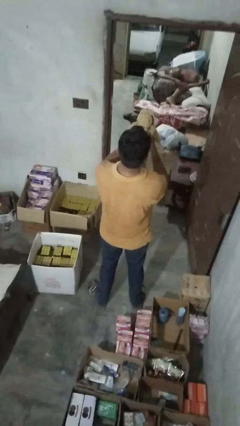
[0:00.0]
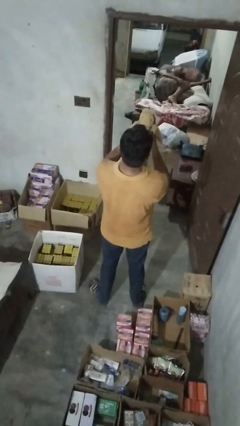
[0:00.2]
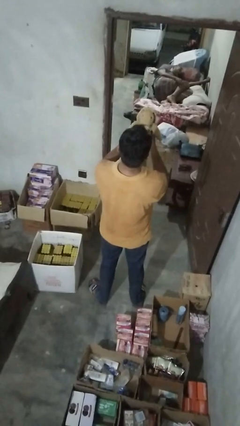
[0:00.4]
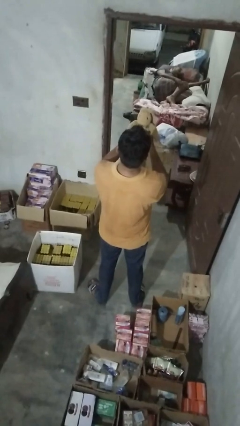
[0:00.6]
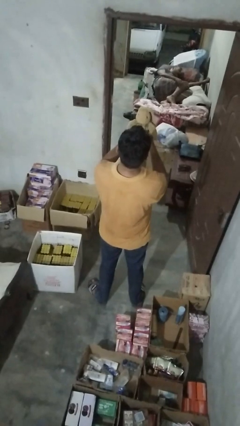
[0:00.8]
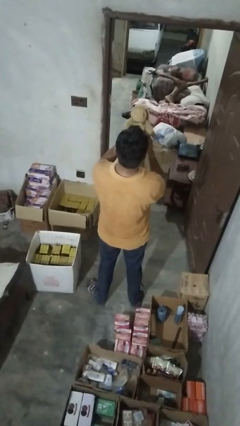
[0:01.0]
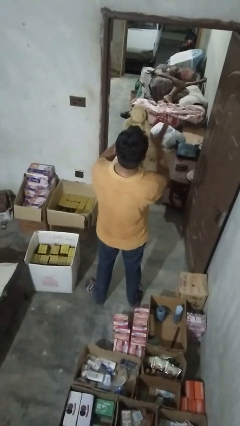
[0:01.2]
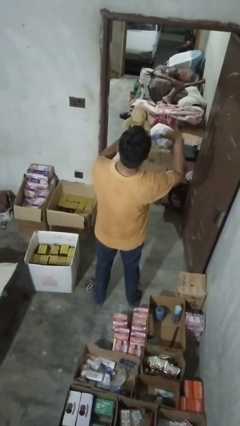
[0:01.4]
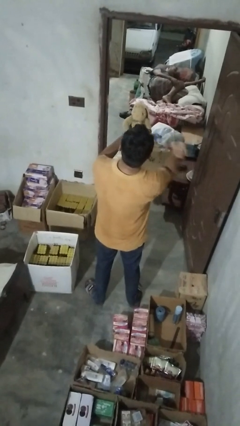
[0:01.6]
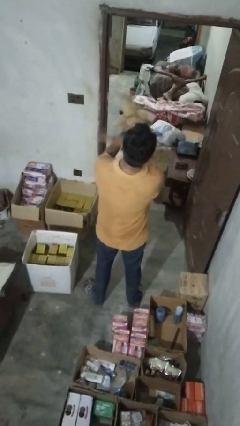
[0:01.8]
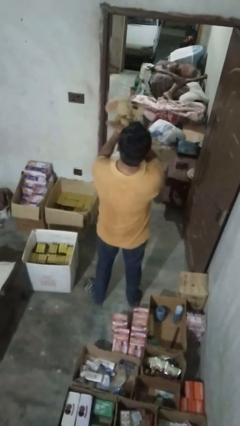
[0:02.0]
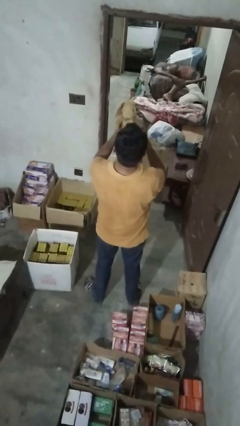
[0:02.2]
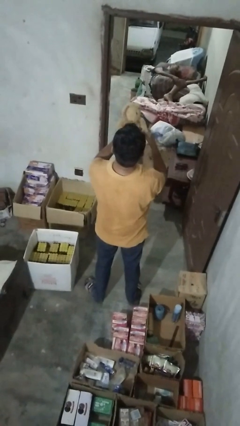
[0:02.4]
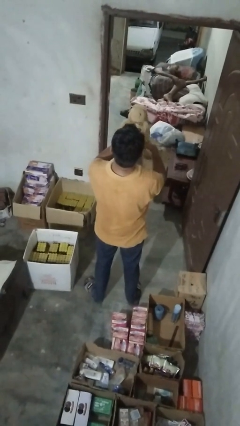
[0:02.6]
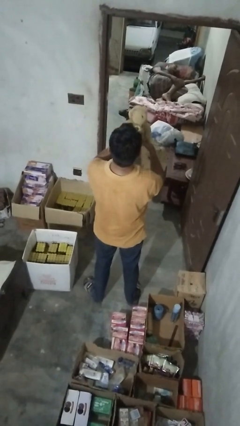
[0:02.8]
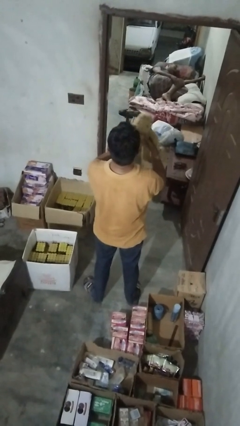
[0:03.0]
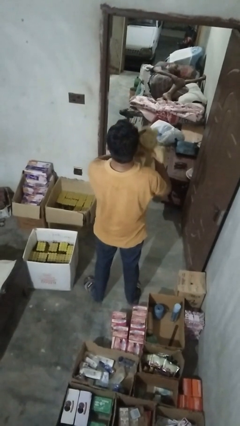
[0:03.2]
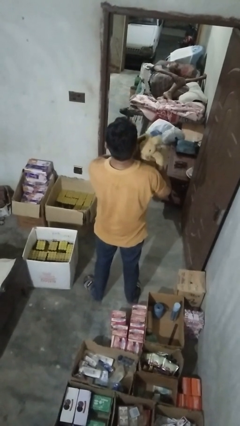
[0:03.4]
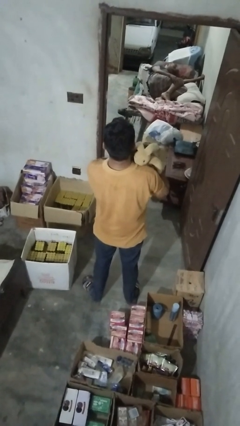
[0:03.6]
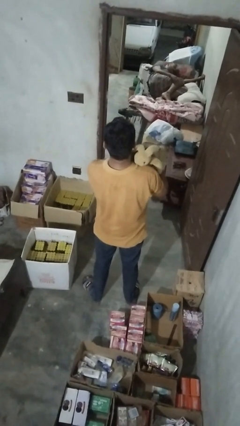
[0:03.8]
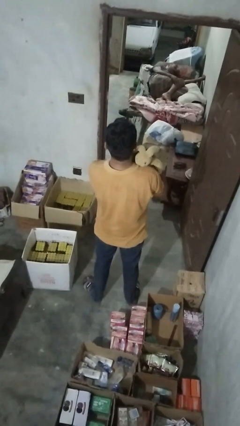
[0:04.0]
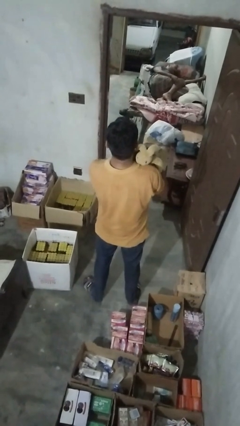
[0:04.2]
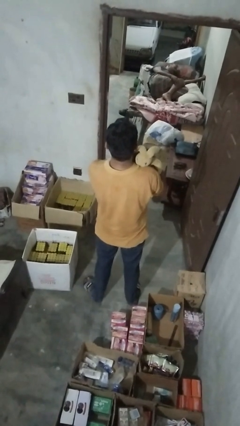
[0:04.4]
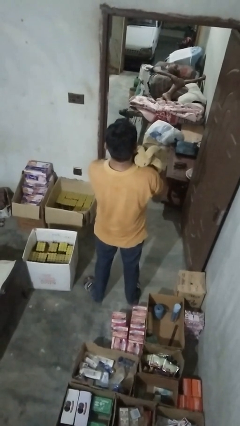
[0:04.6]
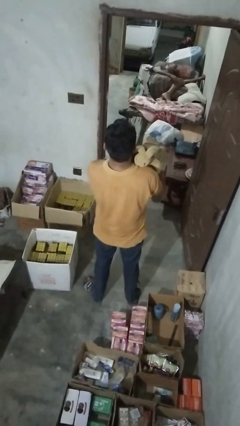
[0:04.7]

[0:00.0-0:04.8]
person hugs stuffed animal

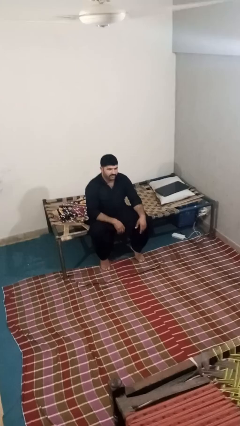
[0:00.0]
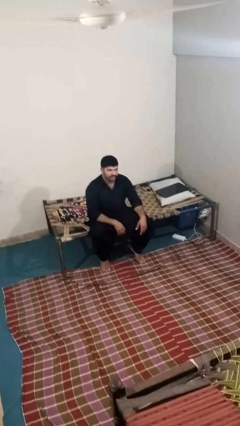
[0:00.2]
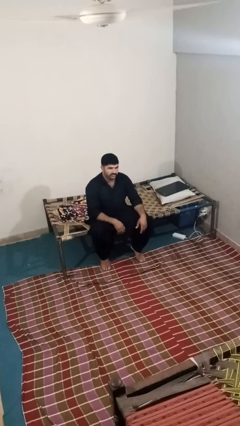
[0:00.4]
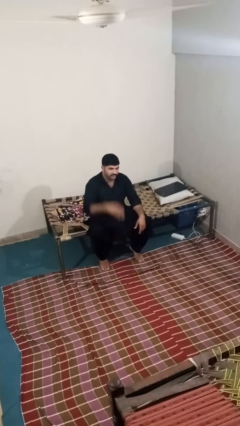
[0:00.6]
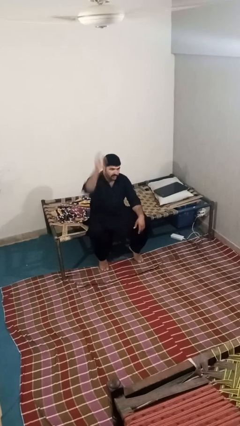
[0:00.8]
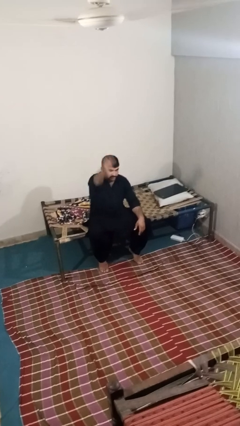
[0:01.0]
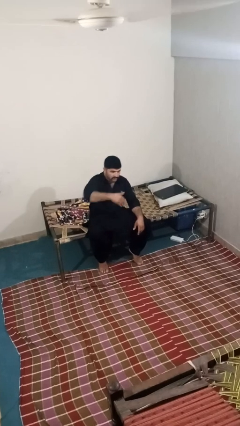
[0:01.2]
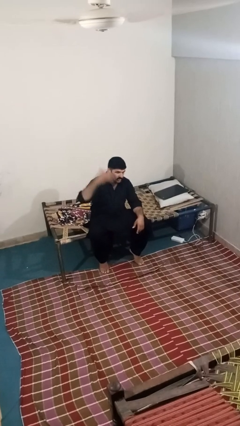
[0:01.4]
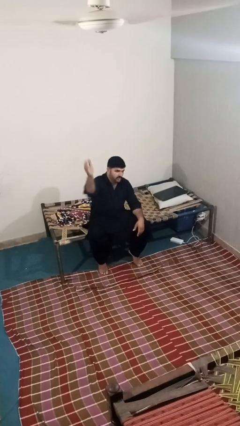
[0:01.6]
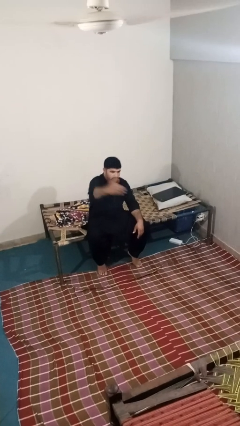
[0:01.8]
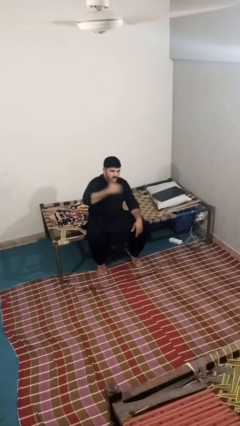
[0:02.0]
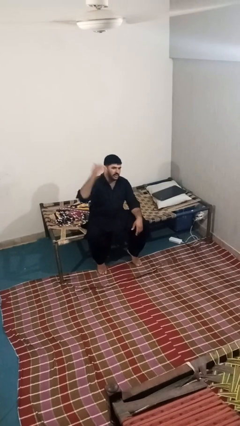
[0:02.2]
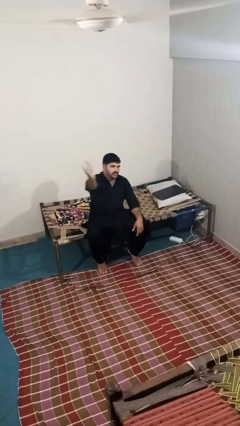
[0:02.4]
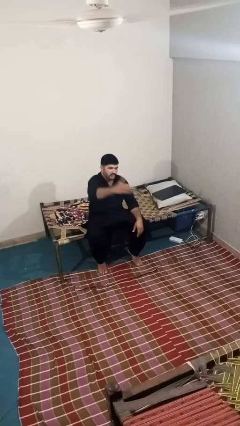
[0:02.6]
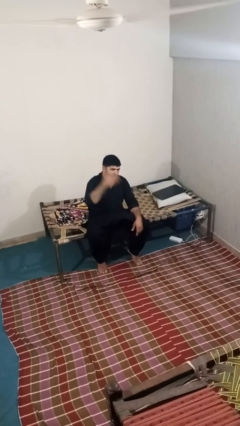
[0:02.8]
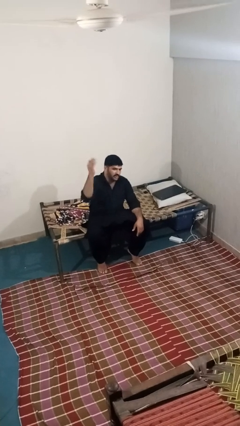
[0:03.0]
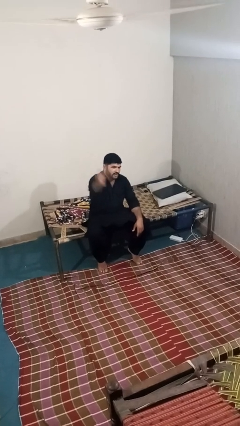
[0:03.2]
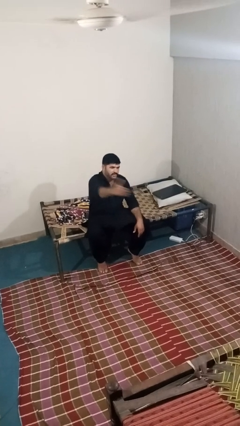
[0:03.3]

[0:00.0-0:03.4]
person gestures come here

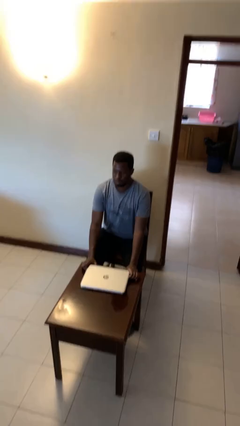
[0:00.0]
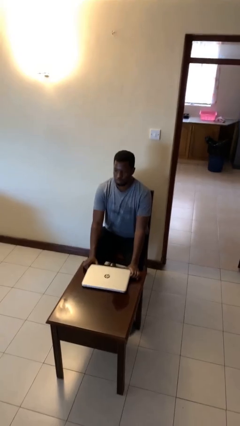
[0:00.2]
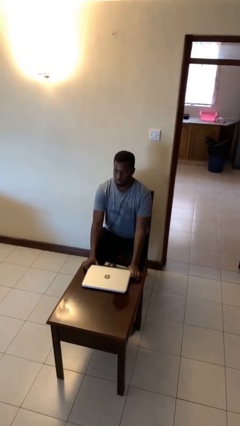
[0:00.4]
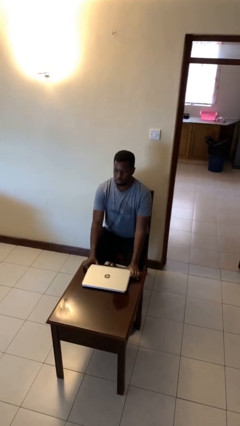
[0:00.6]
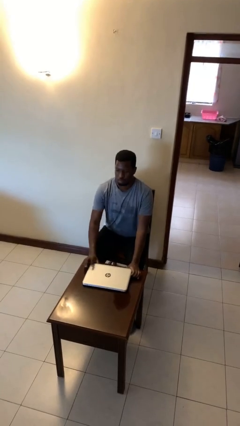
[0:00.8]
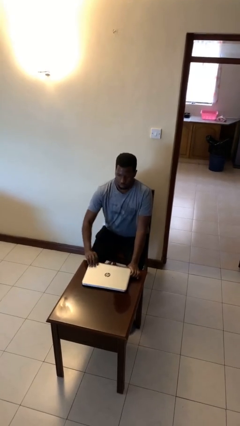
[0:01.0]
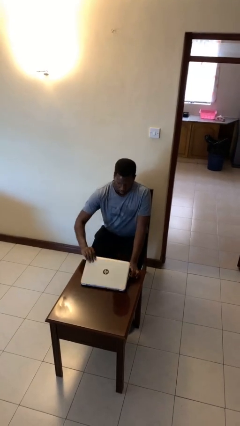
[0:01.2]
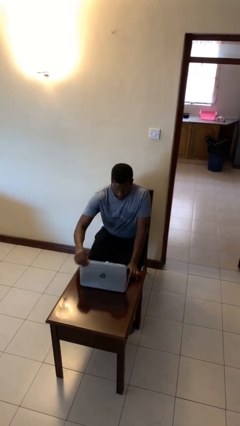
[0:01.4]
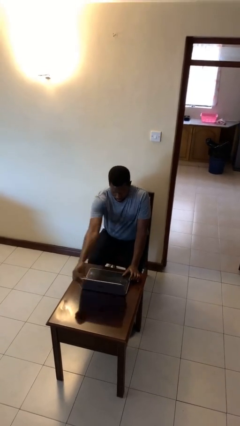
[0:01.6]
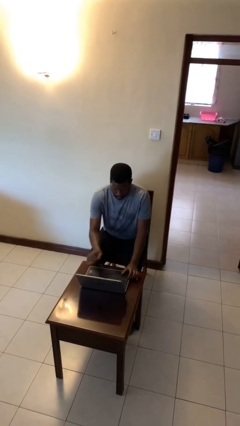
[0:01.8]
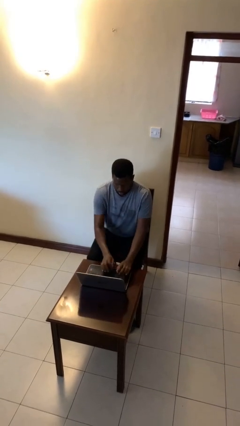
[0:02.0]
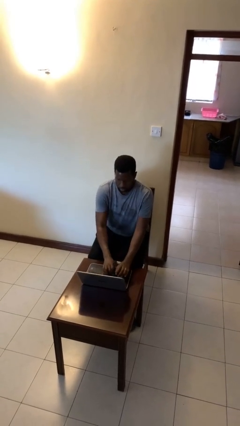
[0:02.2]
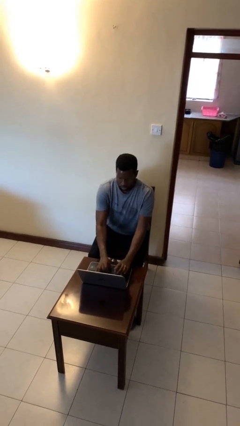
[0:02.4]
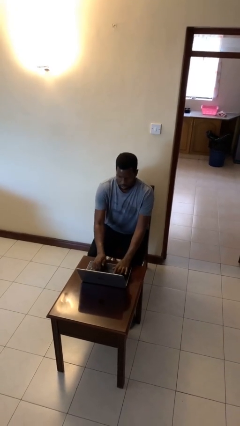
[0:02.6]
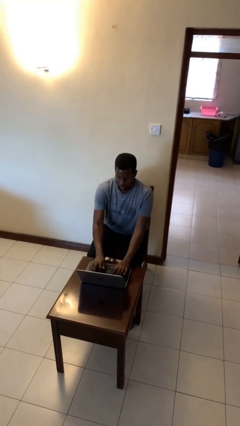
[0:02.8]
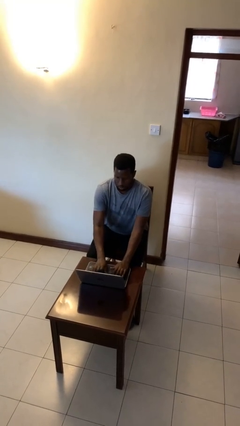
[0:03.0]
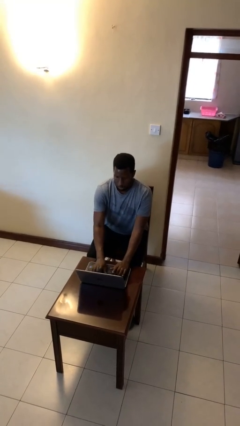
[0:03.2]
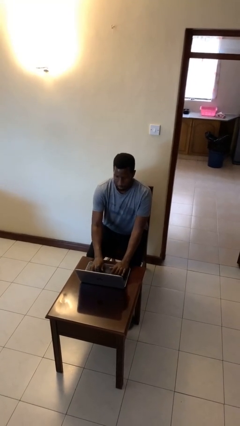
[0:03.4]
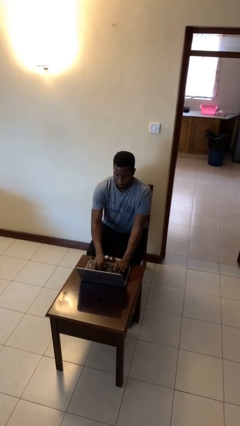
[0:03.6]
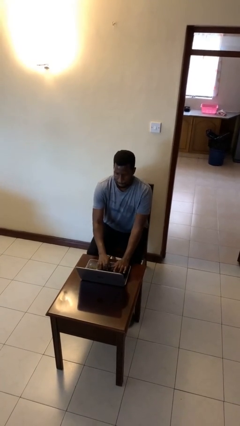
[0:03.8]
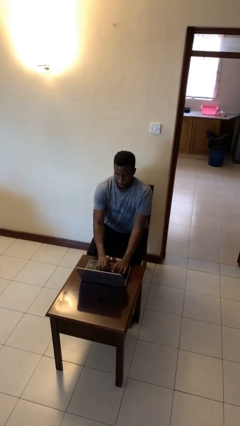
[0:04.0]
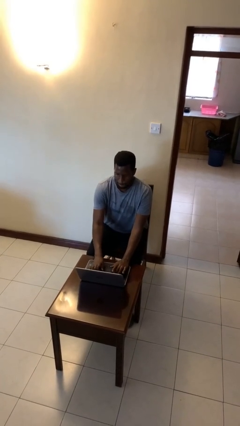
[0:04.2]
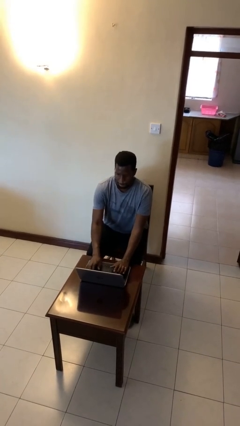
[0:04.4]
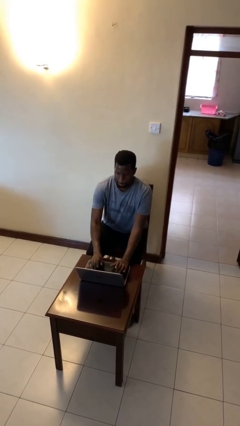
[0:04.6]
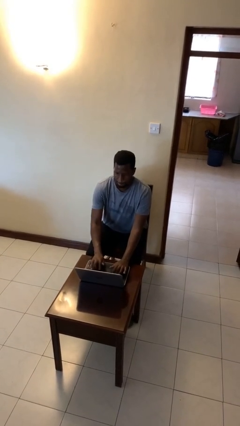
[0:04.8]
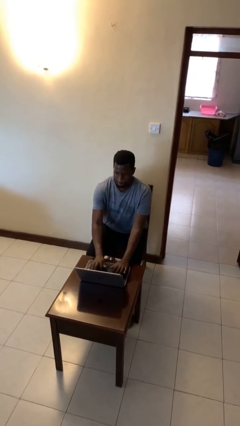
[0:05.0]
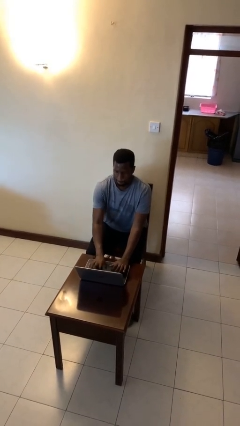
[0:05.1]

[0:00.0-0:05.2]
person interacts with laptop

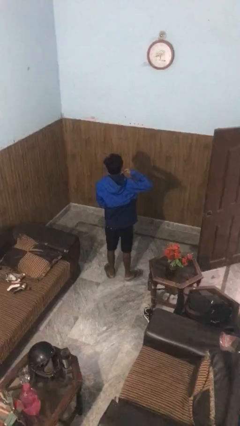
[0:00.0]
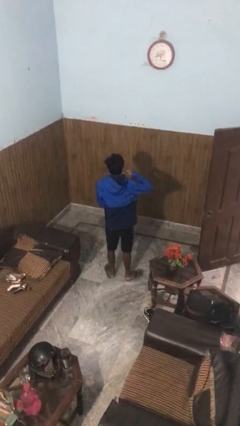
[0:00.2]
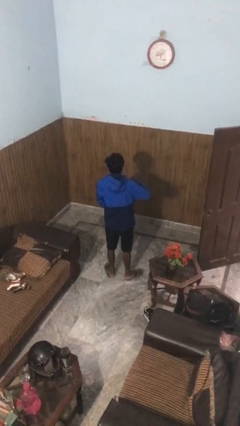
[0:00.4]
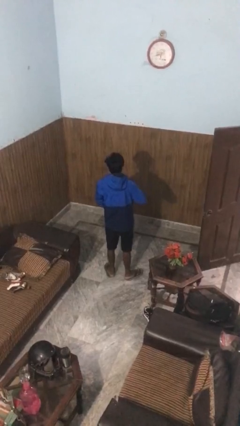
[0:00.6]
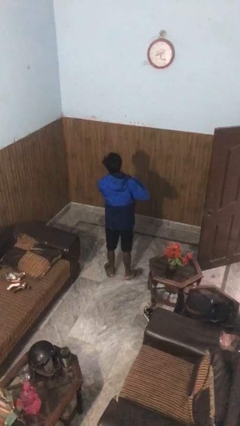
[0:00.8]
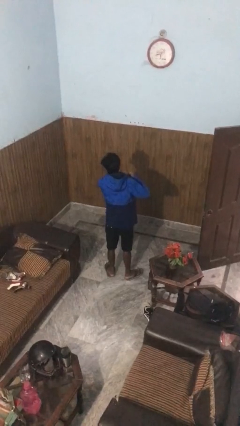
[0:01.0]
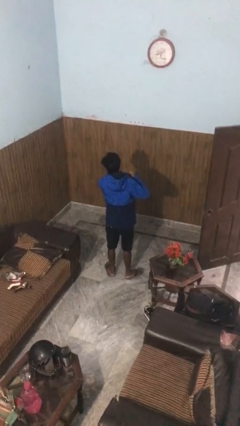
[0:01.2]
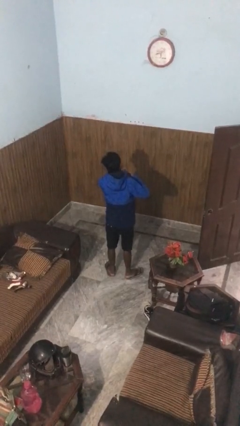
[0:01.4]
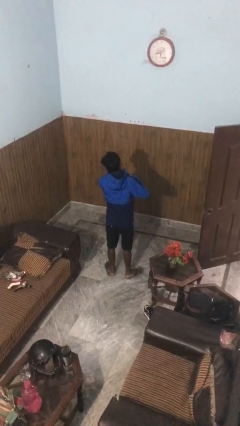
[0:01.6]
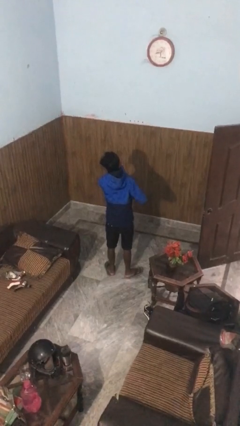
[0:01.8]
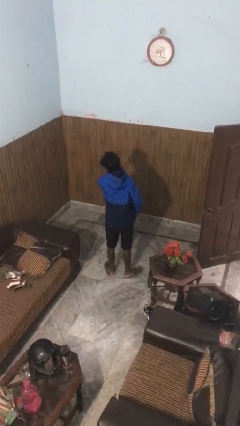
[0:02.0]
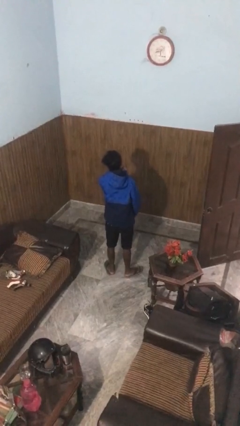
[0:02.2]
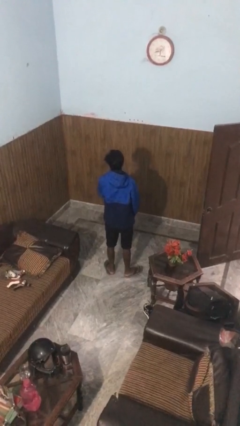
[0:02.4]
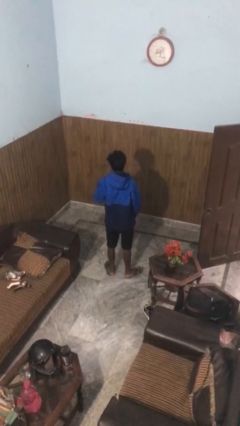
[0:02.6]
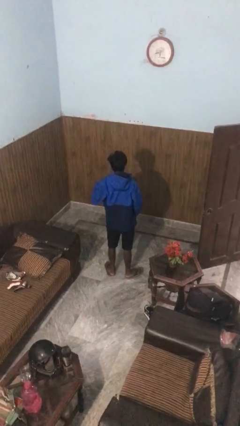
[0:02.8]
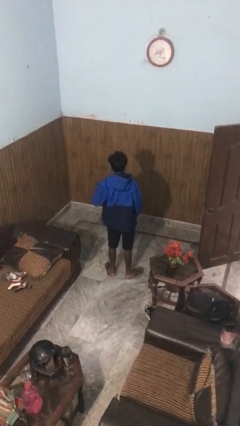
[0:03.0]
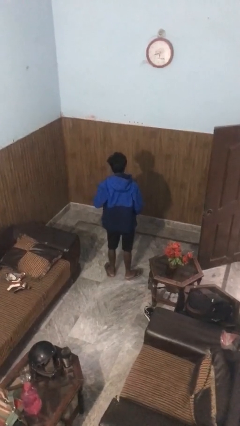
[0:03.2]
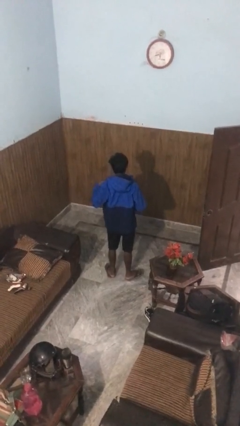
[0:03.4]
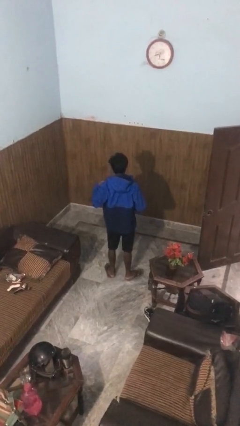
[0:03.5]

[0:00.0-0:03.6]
person unzips jacket

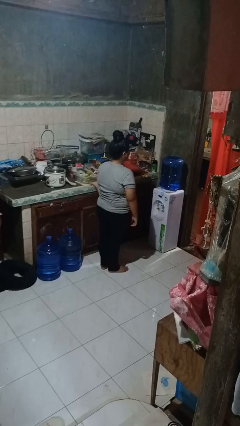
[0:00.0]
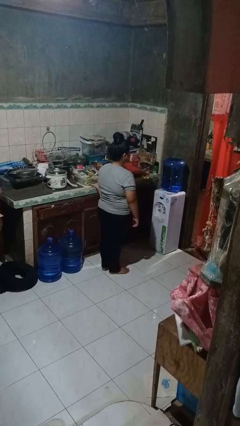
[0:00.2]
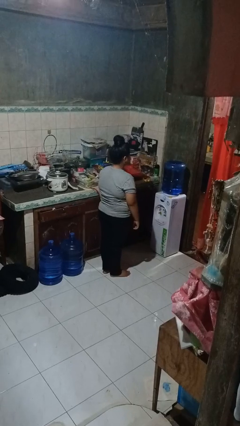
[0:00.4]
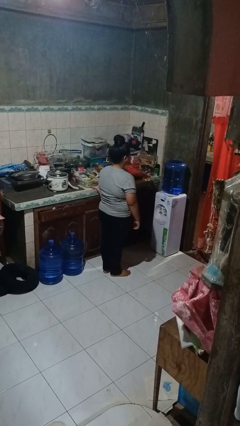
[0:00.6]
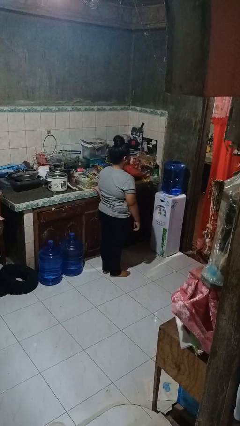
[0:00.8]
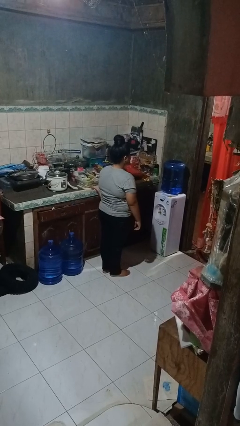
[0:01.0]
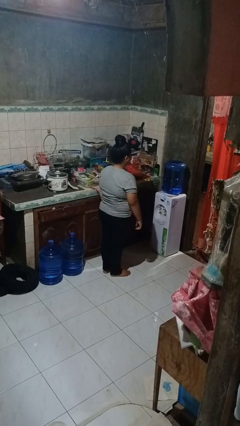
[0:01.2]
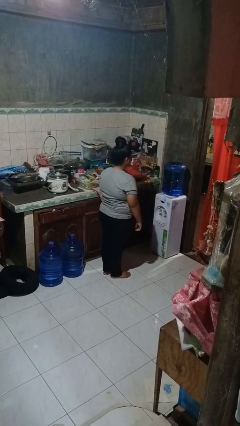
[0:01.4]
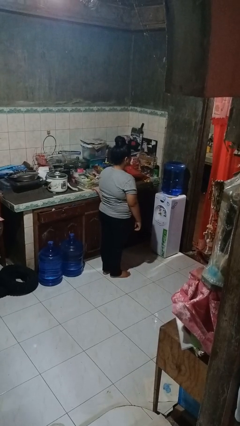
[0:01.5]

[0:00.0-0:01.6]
person stands up from floor
